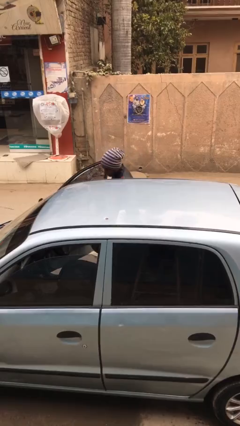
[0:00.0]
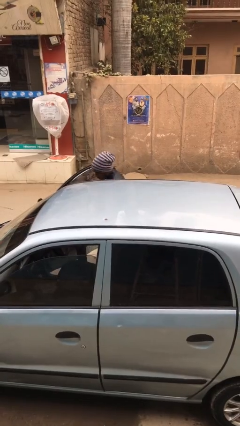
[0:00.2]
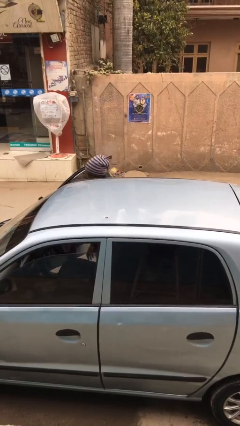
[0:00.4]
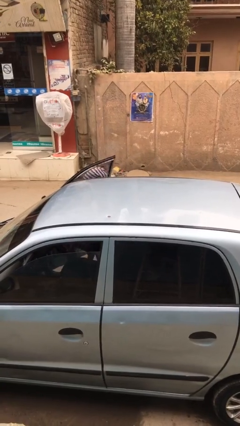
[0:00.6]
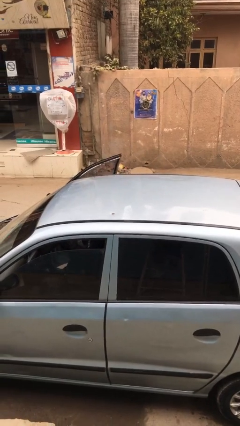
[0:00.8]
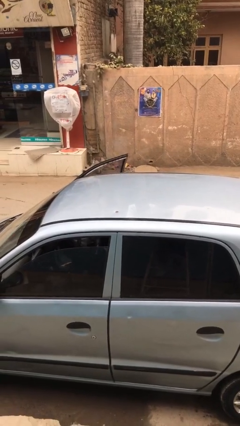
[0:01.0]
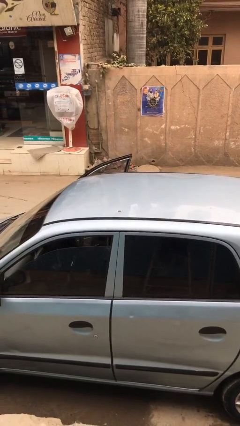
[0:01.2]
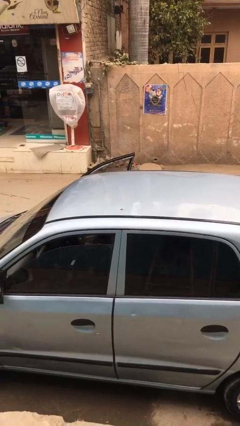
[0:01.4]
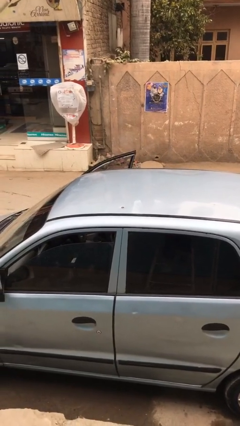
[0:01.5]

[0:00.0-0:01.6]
person enters car

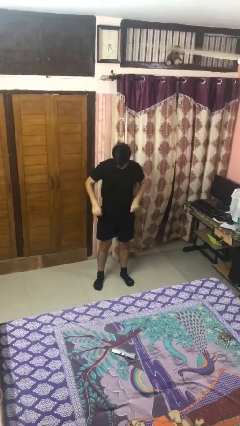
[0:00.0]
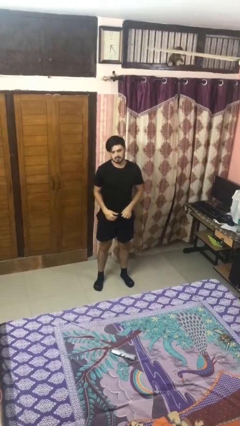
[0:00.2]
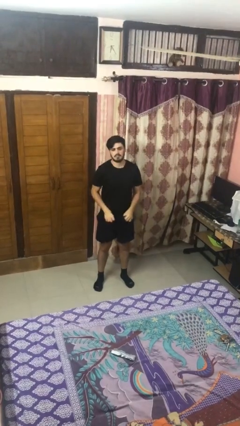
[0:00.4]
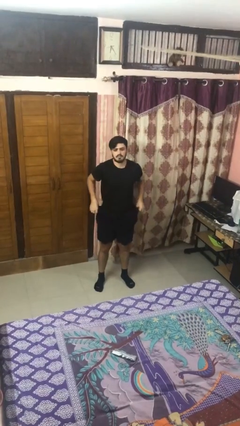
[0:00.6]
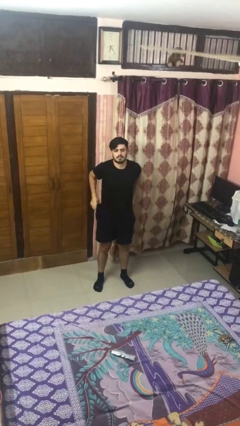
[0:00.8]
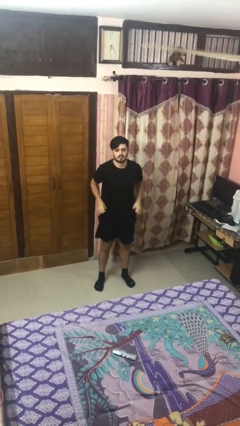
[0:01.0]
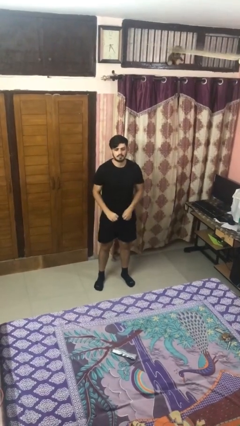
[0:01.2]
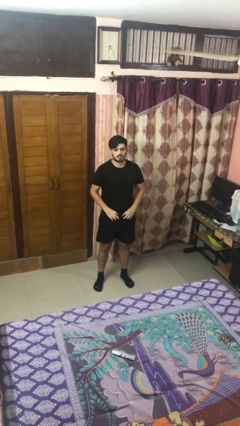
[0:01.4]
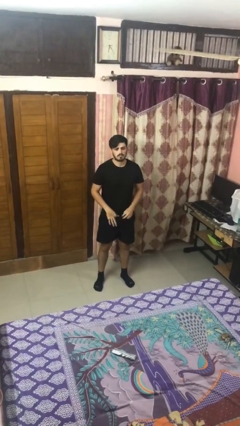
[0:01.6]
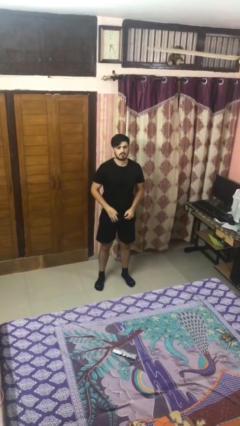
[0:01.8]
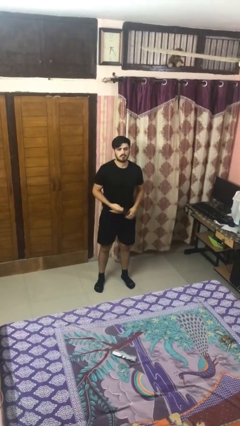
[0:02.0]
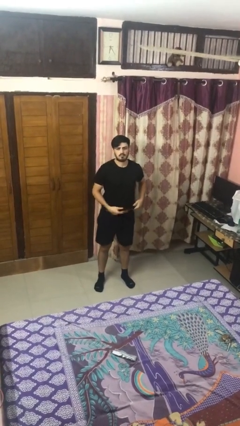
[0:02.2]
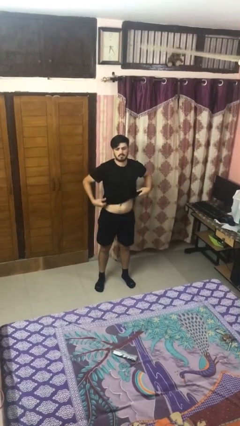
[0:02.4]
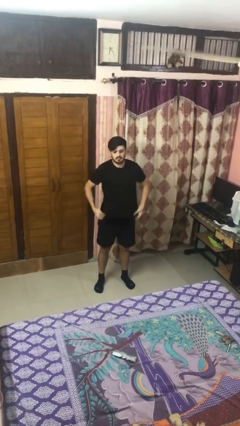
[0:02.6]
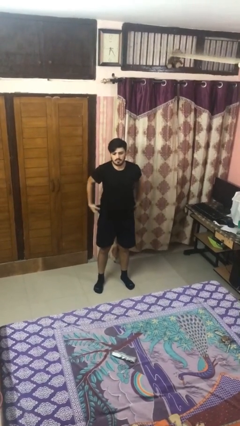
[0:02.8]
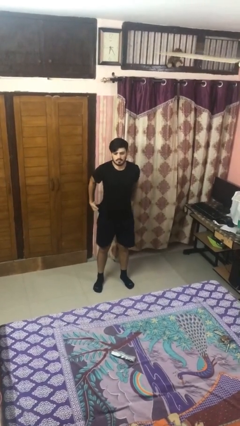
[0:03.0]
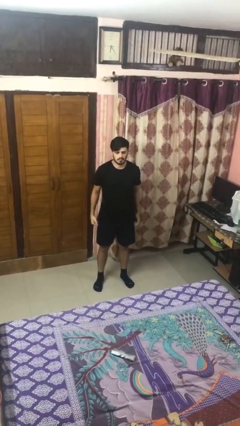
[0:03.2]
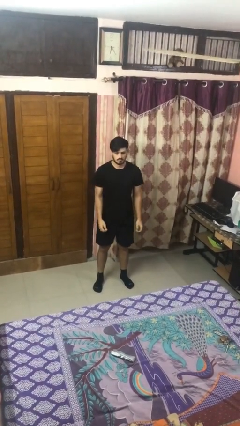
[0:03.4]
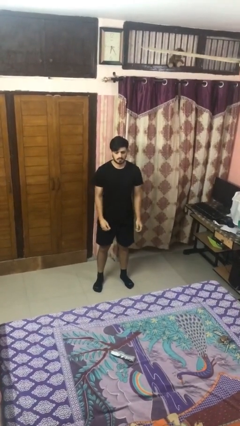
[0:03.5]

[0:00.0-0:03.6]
person untucks shirt

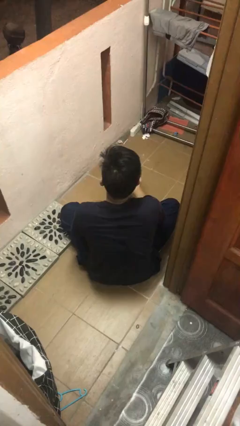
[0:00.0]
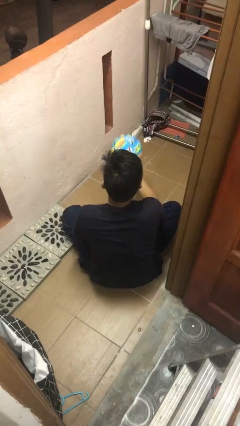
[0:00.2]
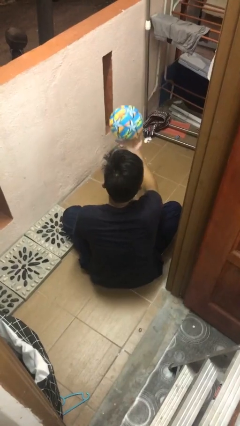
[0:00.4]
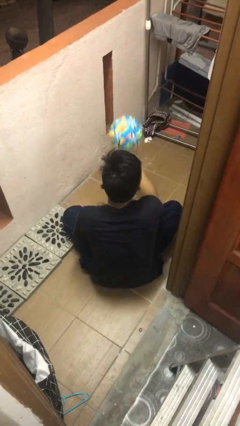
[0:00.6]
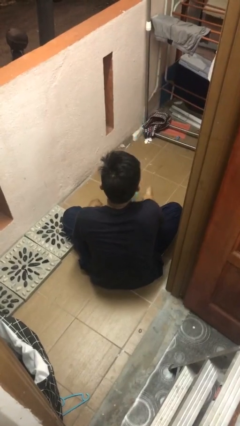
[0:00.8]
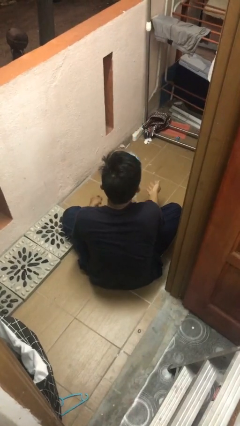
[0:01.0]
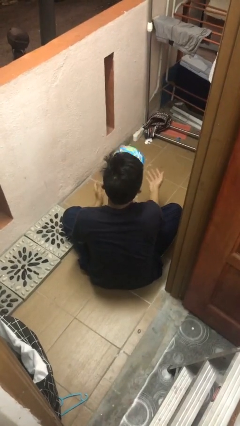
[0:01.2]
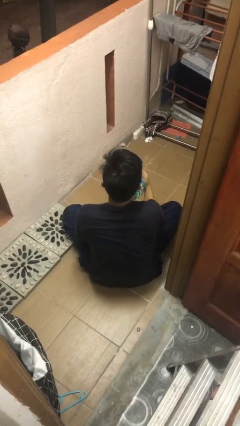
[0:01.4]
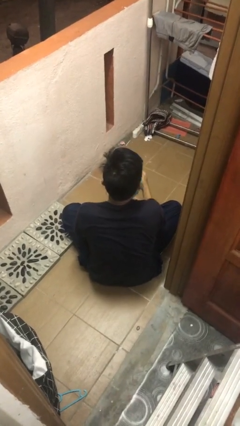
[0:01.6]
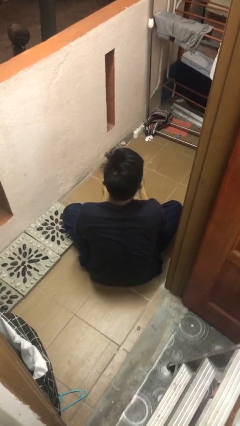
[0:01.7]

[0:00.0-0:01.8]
person bounces ball on floor

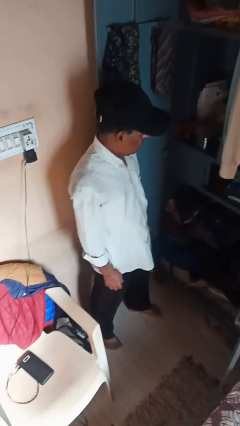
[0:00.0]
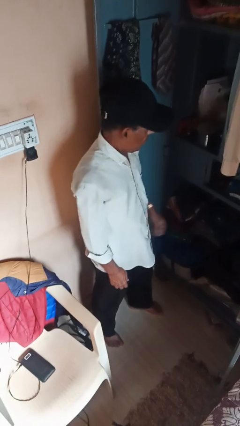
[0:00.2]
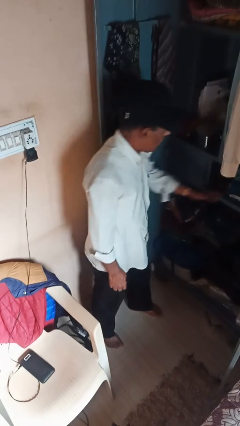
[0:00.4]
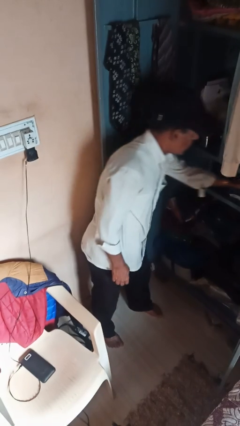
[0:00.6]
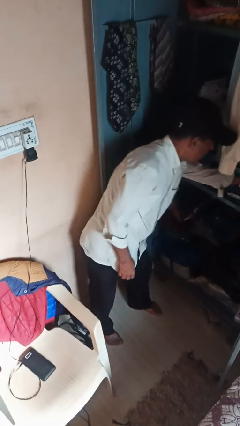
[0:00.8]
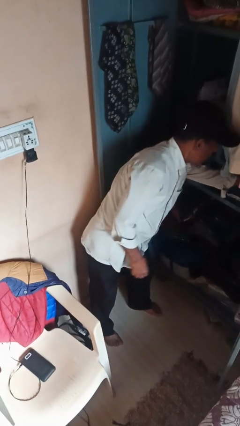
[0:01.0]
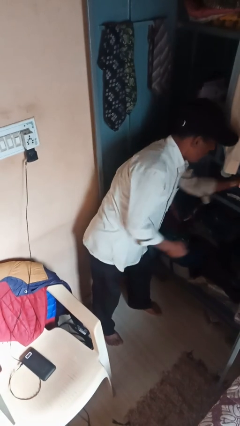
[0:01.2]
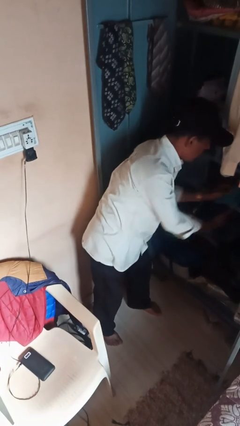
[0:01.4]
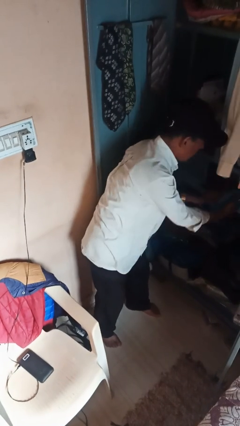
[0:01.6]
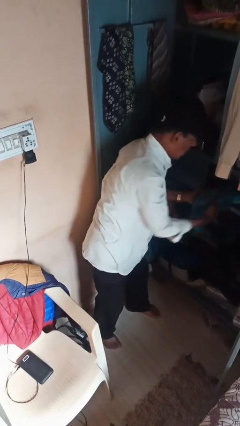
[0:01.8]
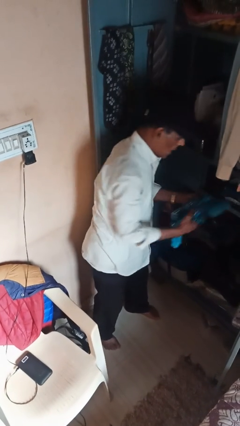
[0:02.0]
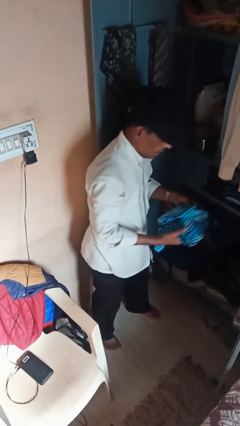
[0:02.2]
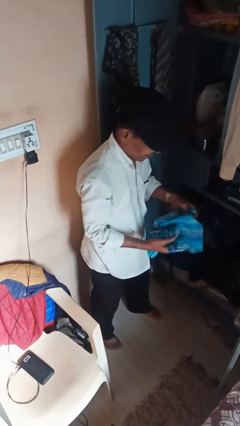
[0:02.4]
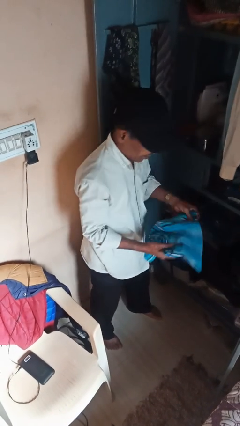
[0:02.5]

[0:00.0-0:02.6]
person takes clothes from dresser

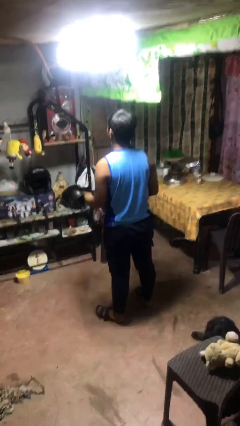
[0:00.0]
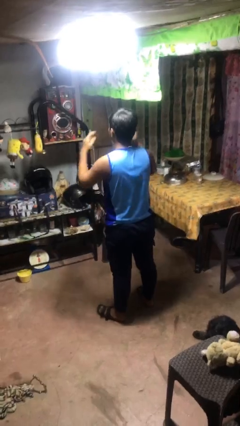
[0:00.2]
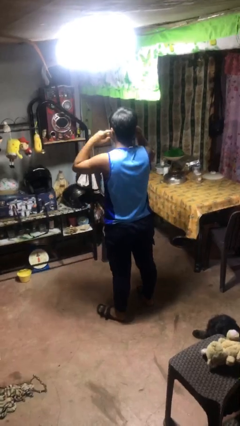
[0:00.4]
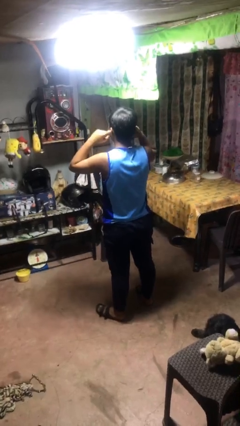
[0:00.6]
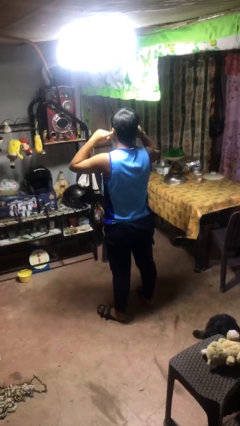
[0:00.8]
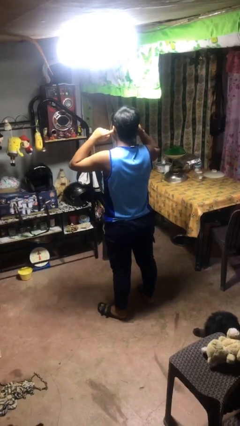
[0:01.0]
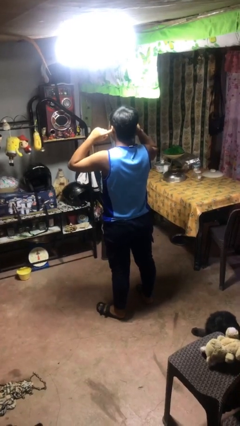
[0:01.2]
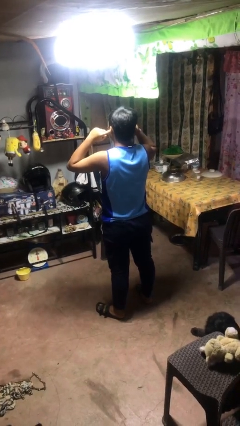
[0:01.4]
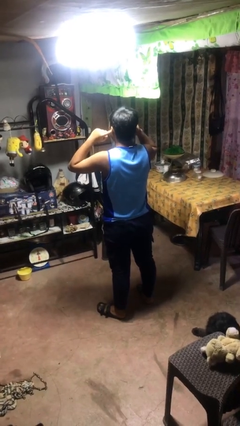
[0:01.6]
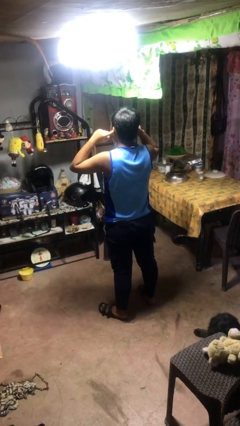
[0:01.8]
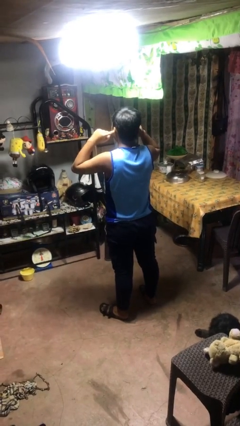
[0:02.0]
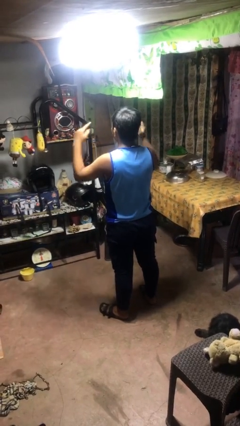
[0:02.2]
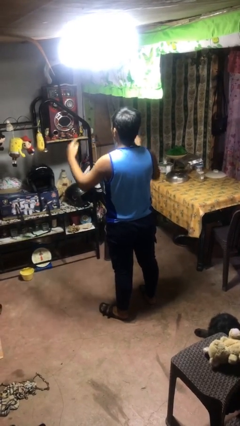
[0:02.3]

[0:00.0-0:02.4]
person puts fingers in ear

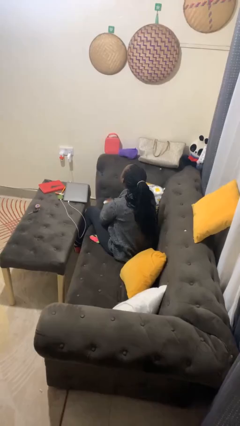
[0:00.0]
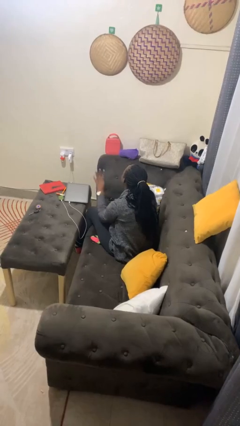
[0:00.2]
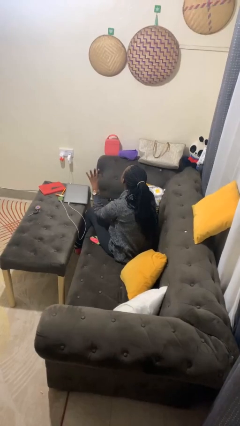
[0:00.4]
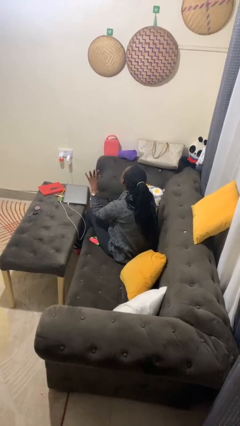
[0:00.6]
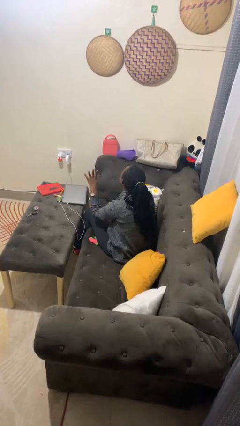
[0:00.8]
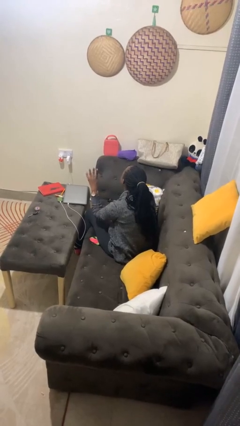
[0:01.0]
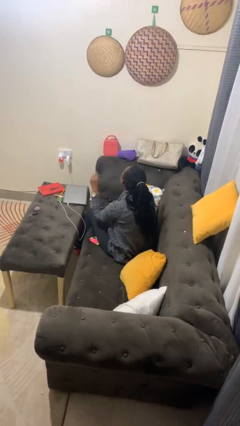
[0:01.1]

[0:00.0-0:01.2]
person gestures number four

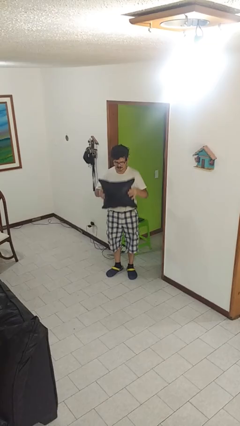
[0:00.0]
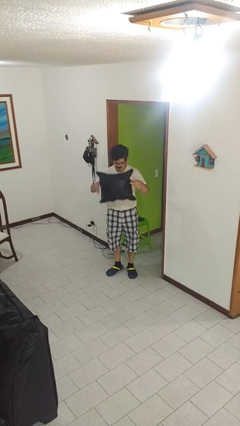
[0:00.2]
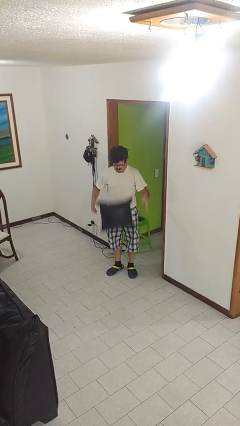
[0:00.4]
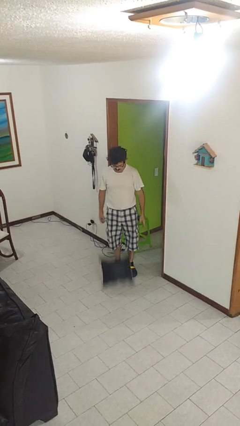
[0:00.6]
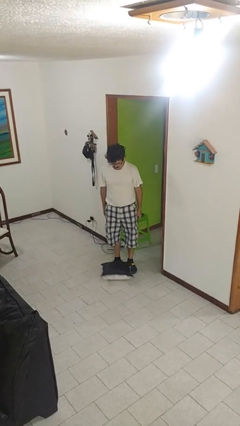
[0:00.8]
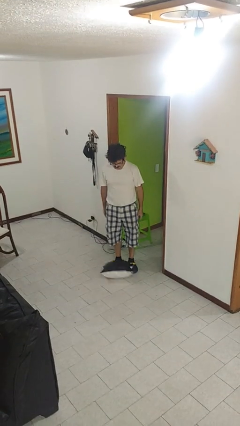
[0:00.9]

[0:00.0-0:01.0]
person throws object into air

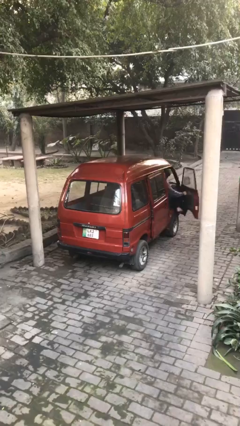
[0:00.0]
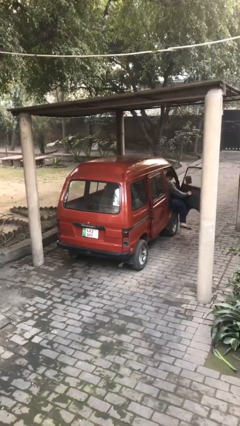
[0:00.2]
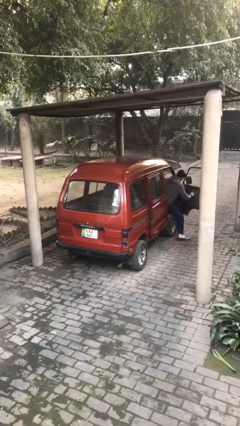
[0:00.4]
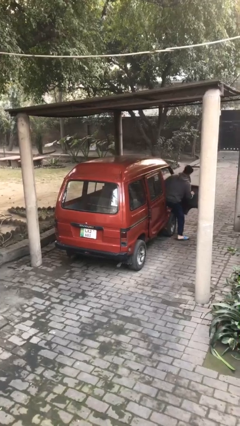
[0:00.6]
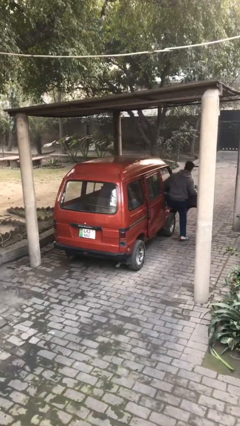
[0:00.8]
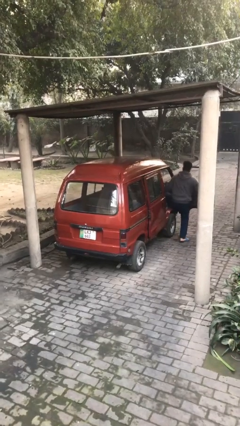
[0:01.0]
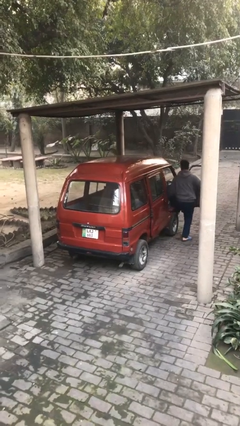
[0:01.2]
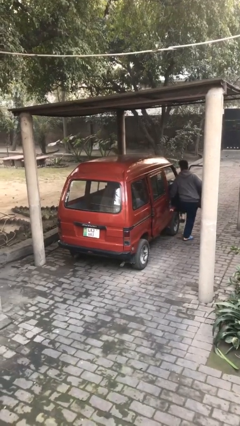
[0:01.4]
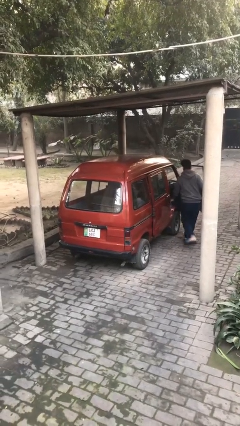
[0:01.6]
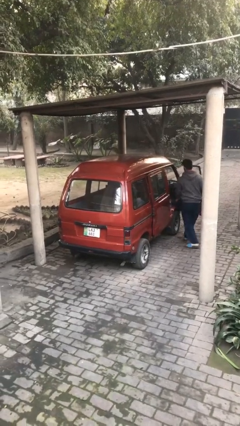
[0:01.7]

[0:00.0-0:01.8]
car drops off person

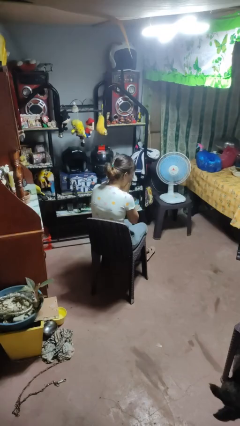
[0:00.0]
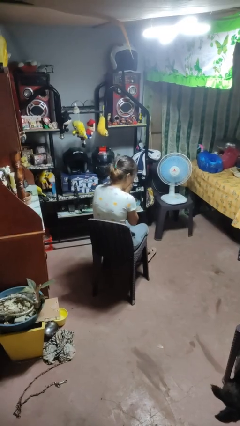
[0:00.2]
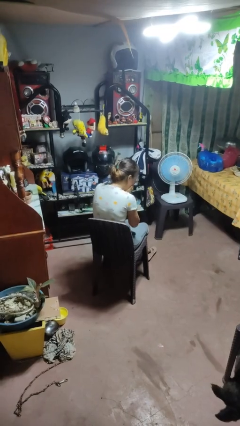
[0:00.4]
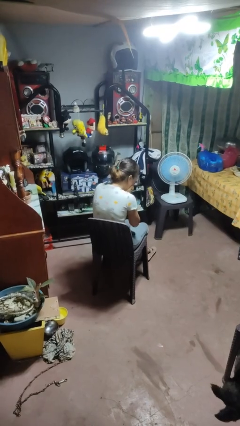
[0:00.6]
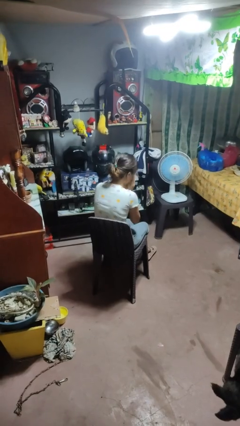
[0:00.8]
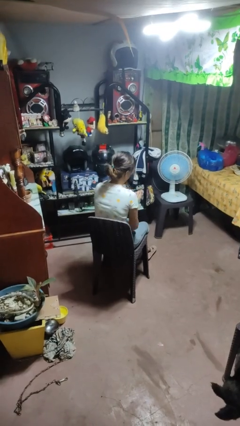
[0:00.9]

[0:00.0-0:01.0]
person sneezes into hand
